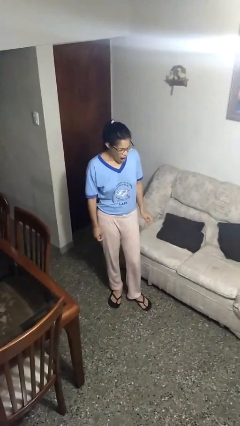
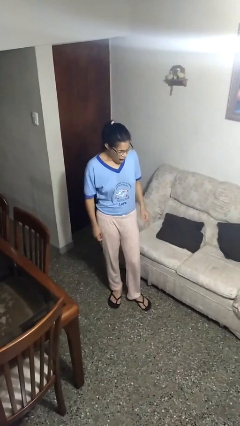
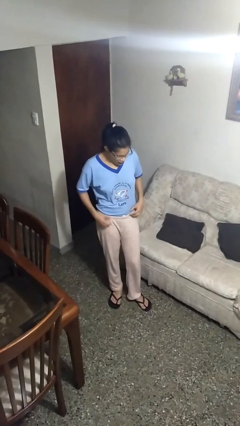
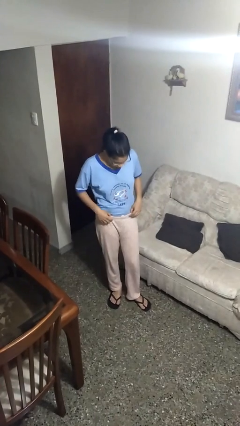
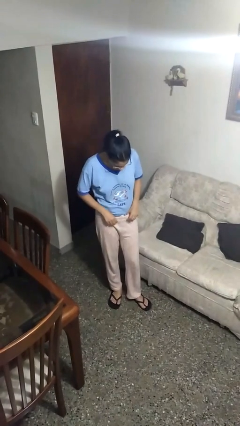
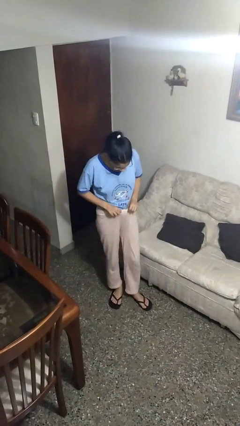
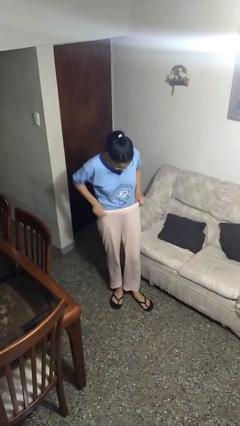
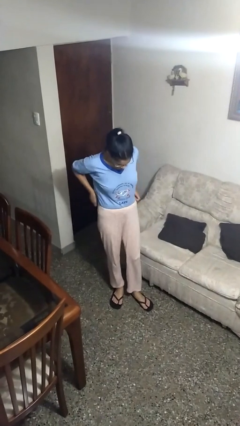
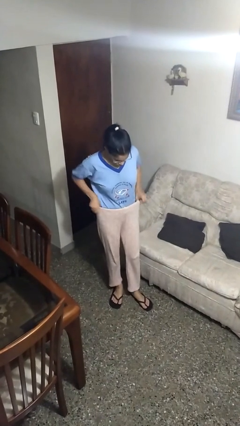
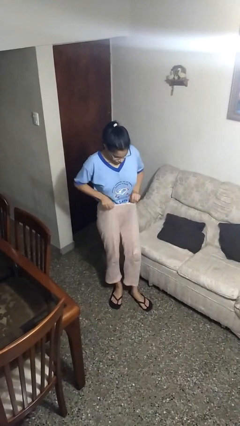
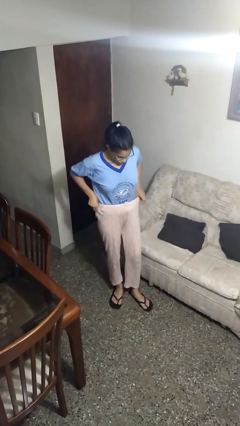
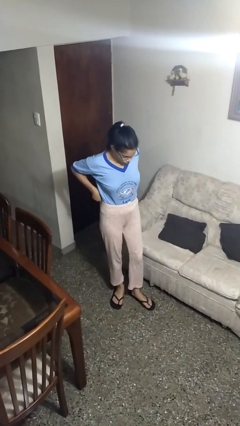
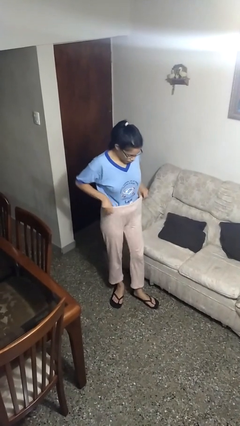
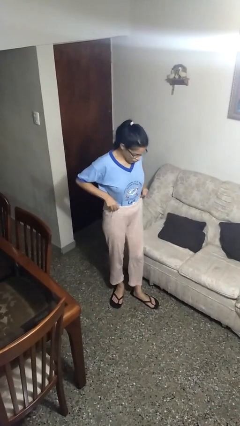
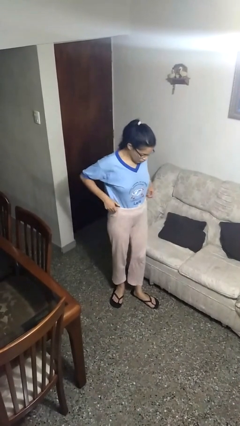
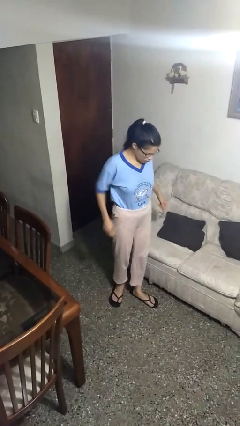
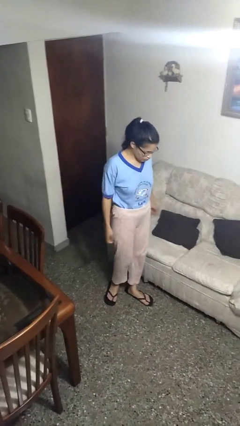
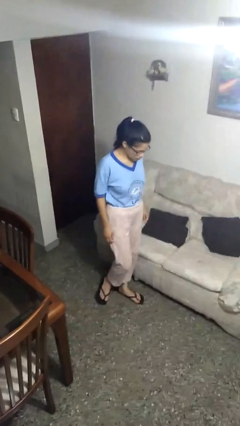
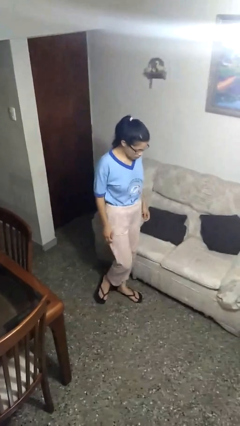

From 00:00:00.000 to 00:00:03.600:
person hikes up pants

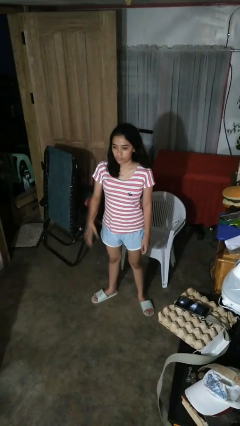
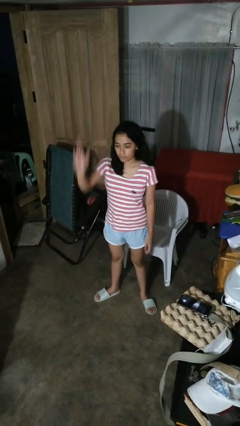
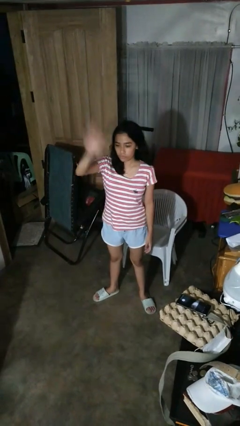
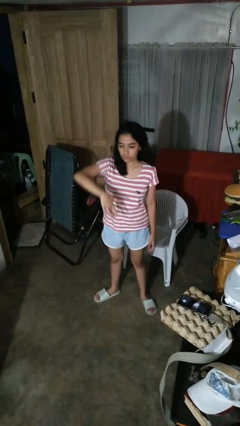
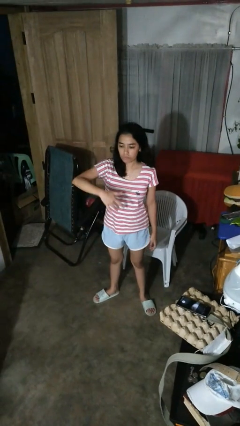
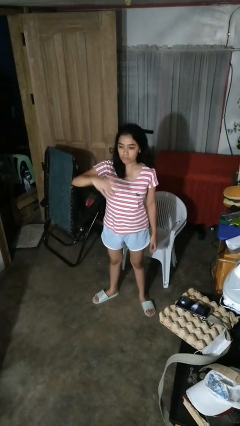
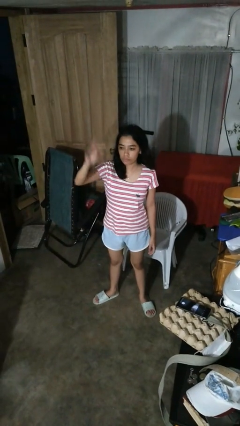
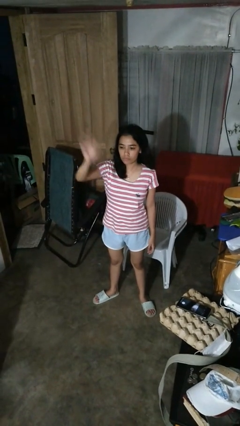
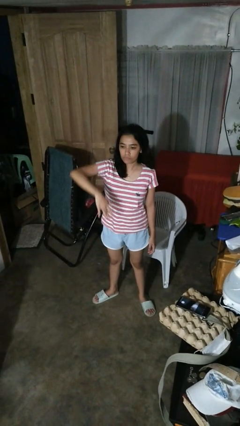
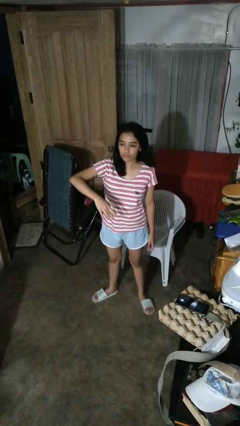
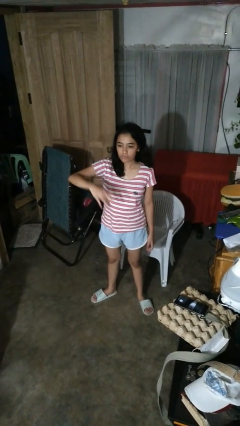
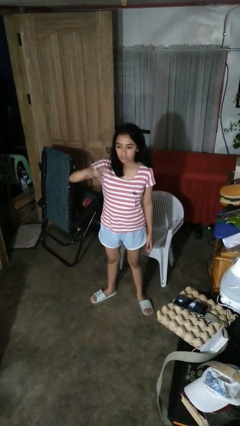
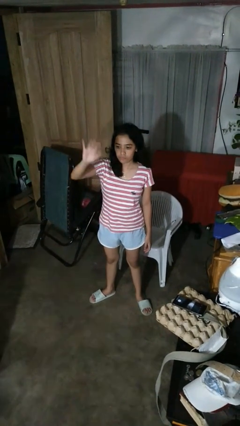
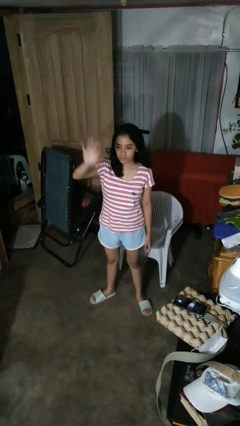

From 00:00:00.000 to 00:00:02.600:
person gestures swipe down

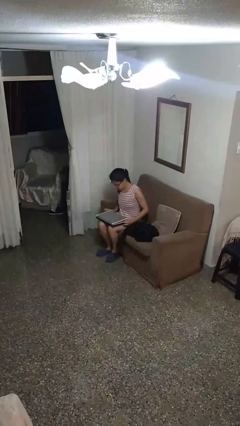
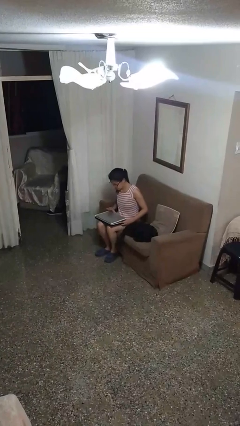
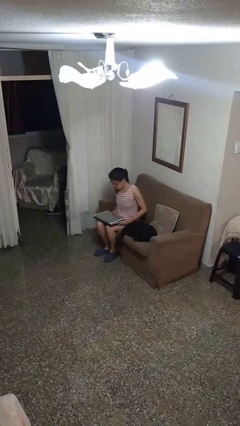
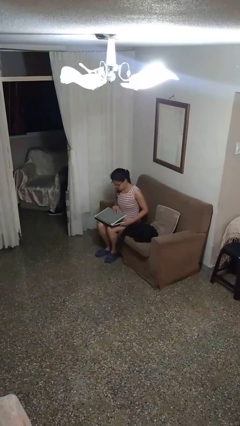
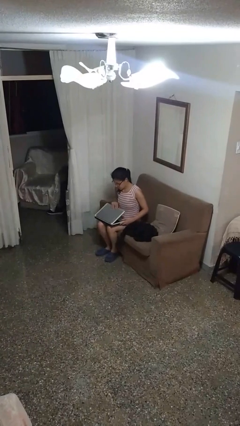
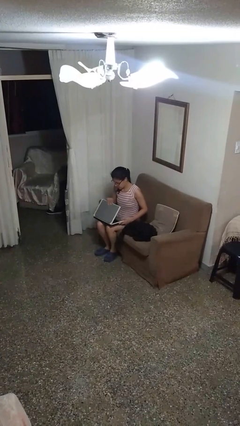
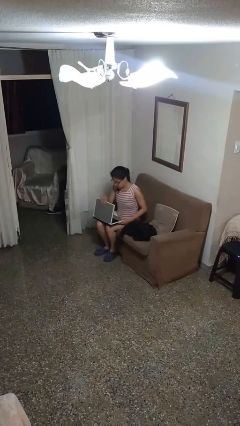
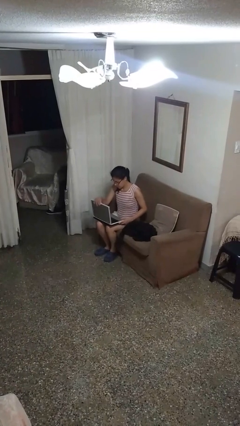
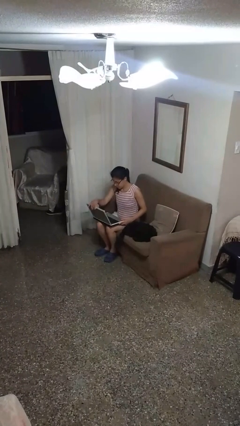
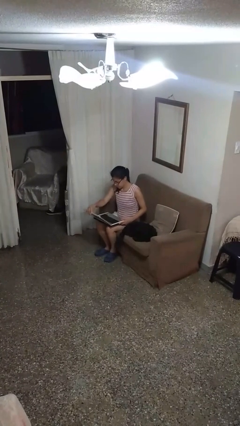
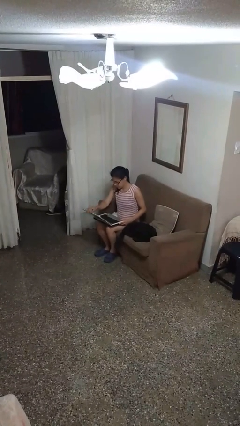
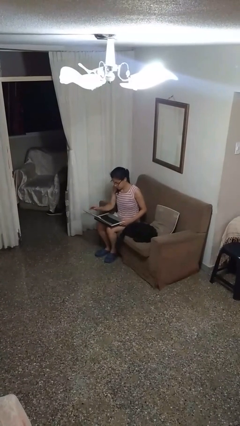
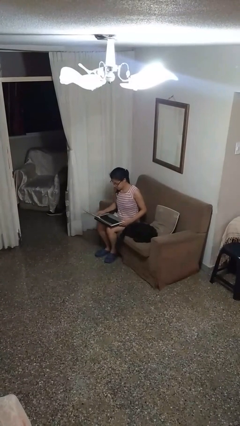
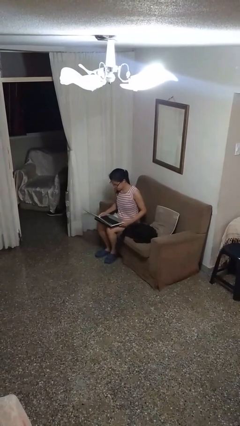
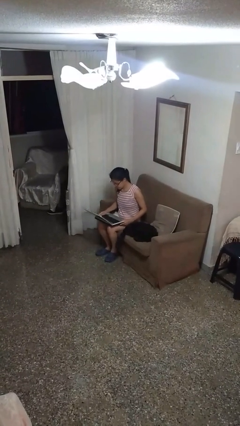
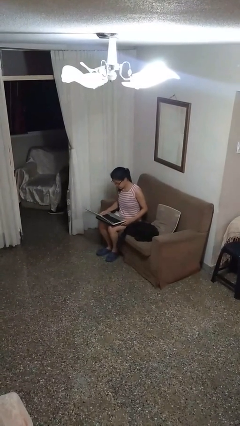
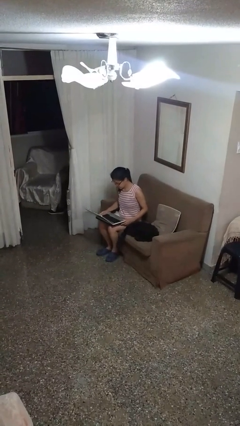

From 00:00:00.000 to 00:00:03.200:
person opens laptop

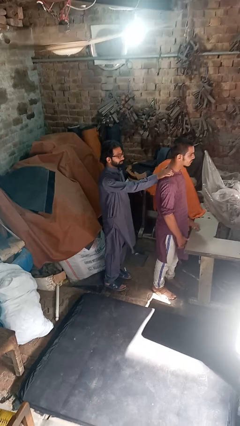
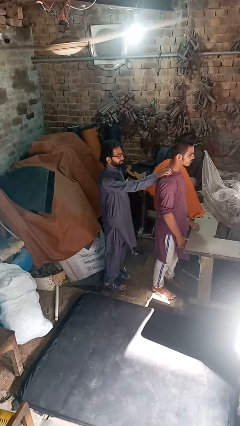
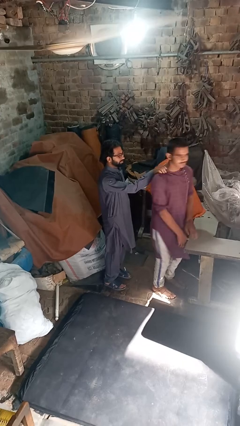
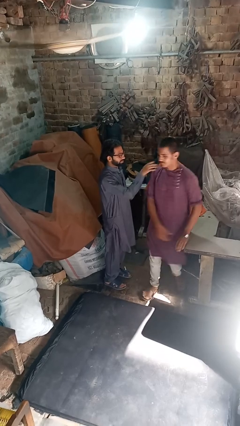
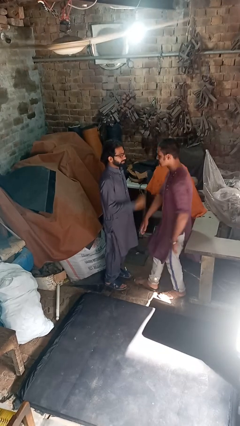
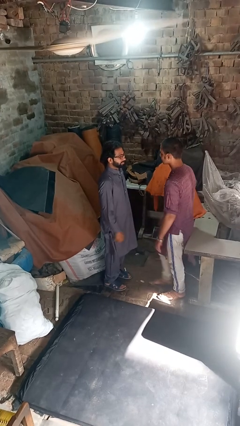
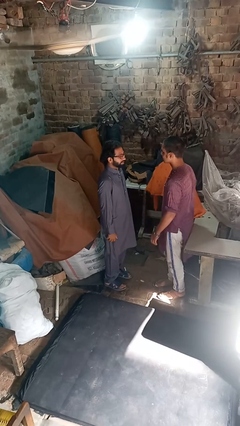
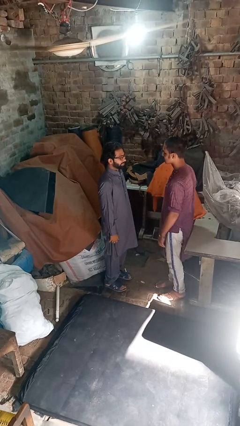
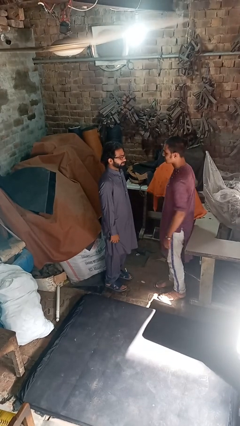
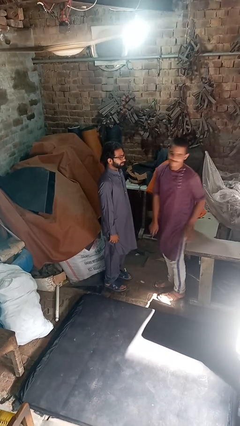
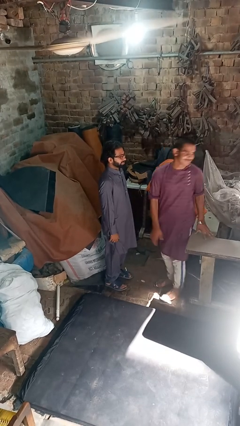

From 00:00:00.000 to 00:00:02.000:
person spins person around

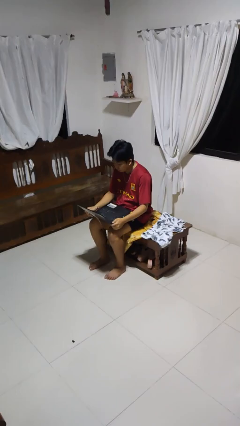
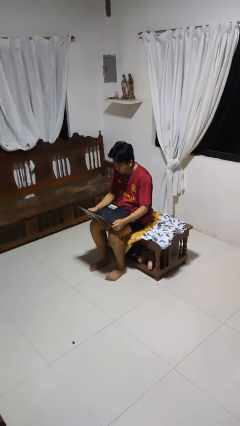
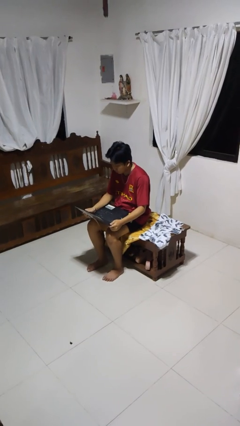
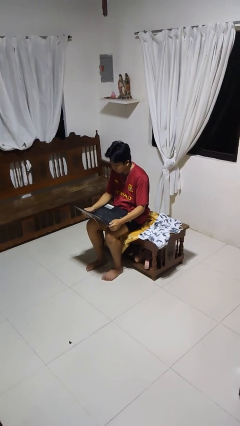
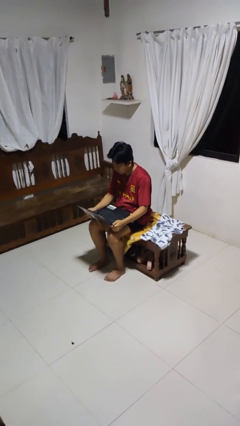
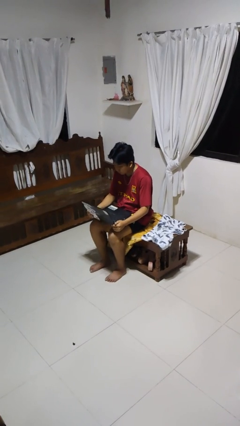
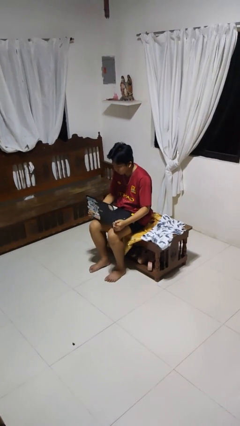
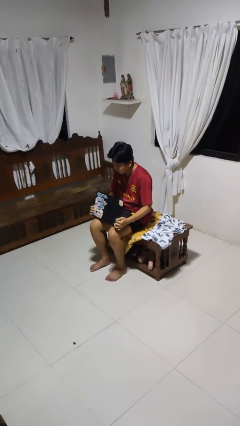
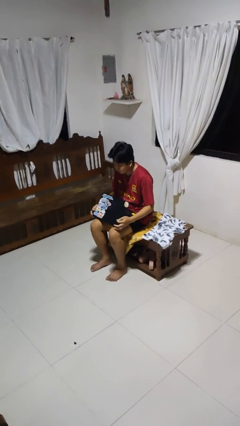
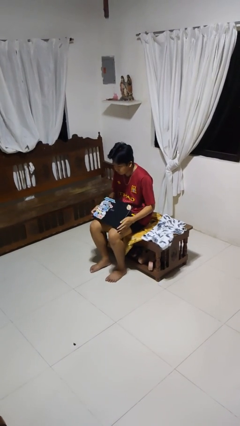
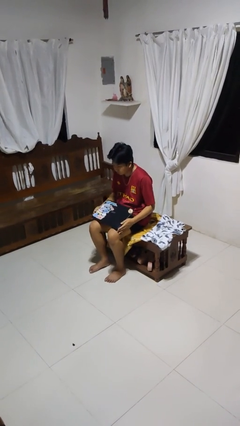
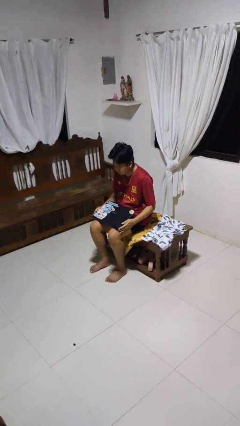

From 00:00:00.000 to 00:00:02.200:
person closes laptop

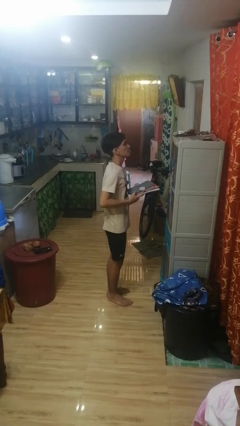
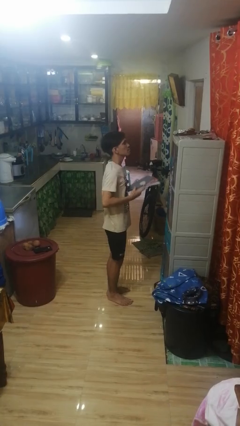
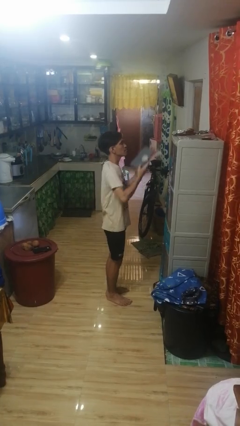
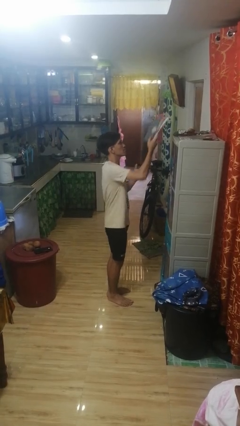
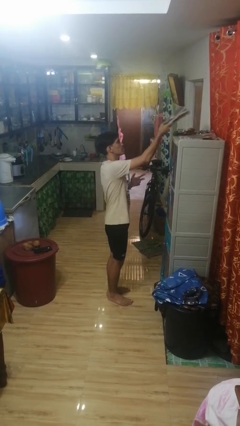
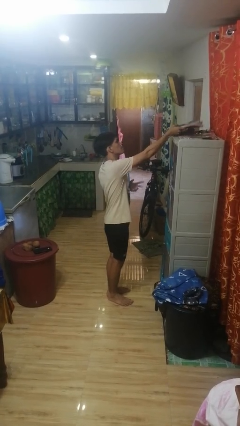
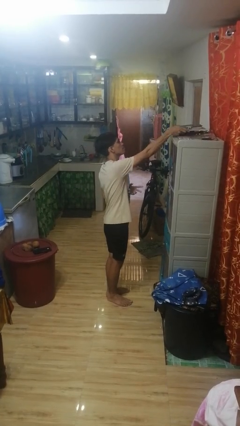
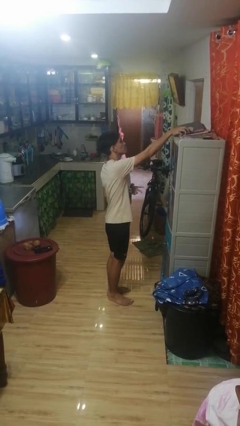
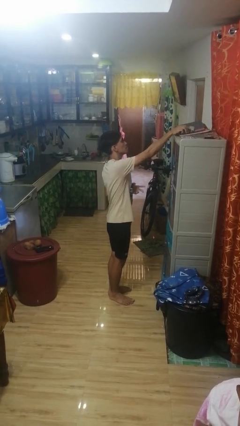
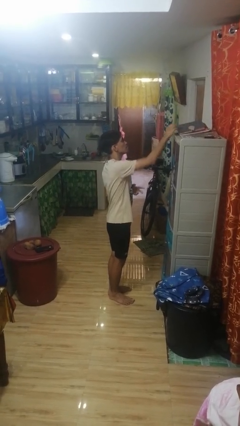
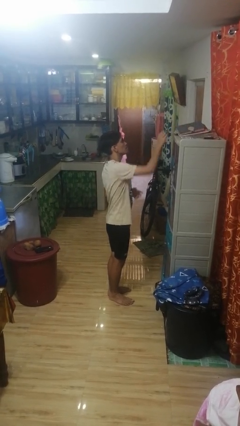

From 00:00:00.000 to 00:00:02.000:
person puts down object on shelf

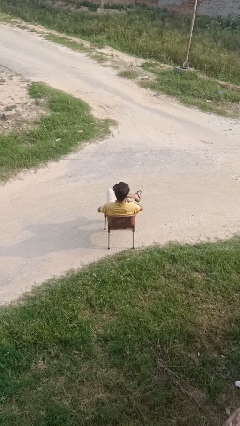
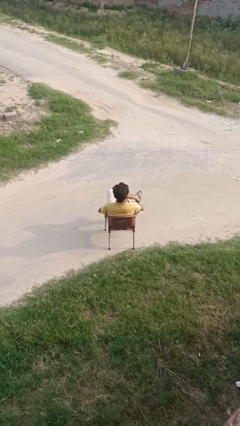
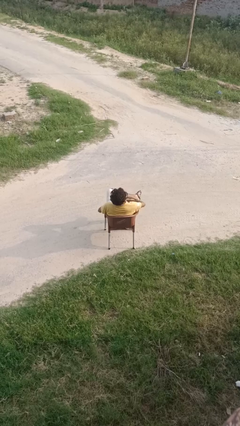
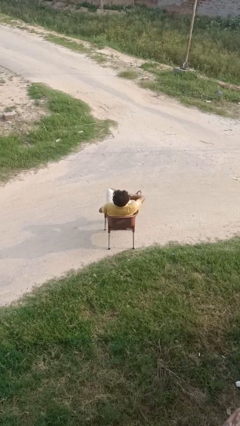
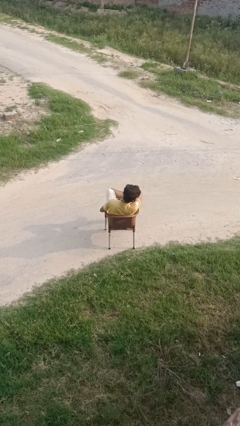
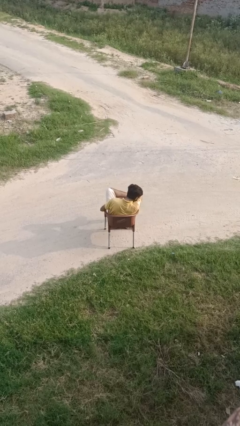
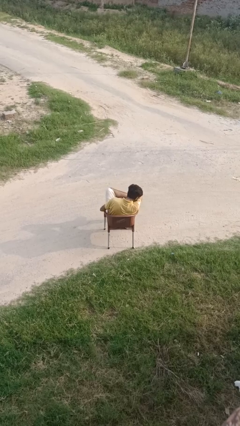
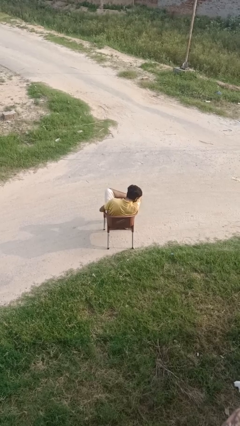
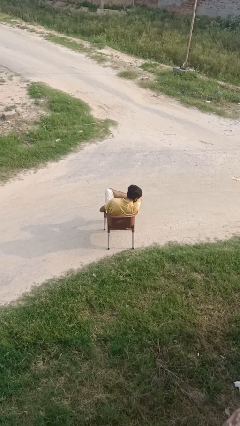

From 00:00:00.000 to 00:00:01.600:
person sneezes into arm
